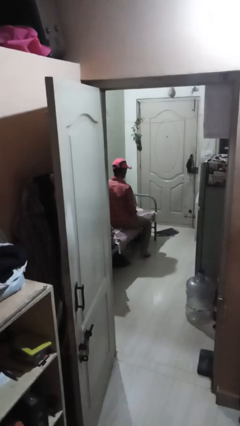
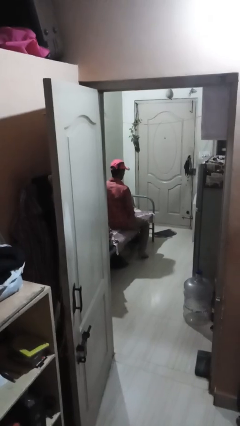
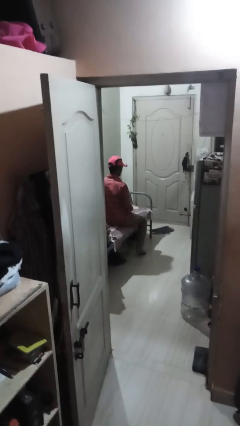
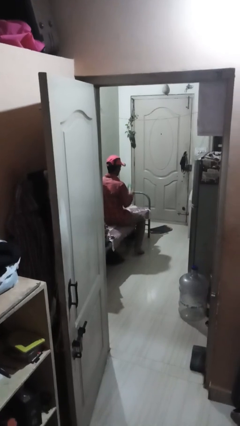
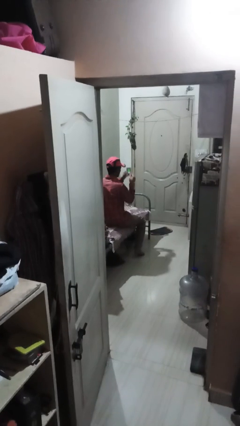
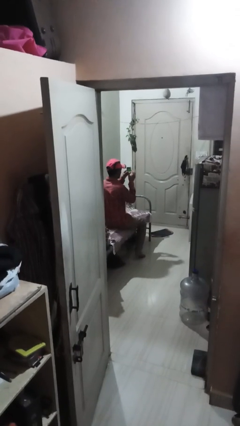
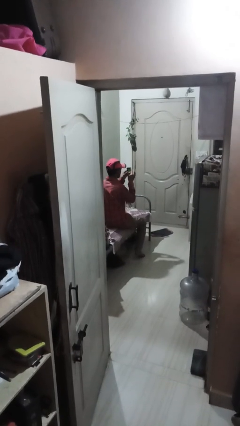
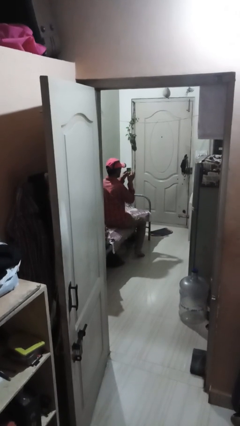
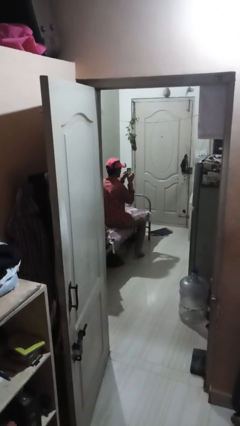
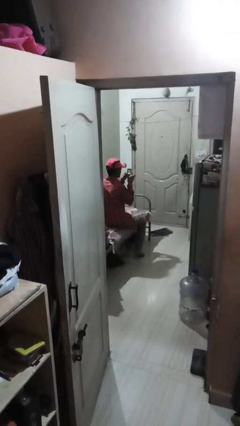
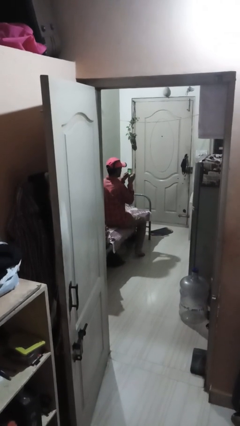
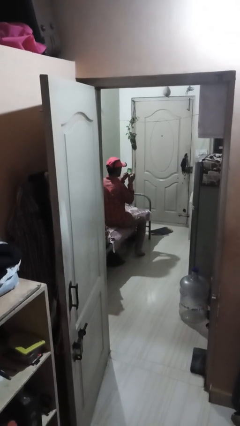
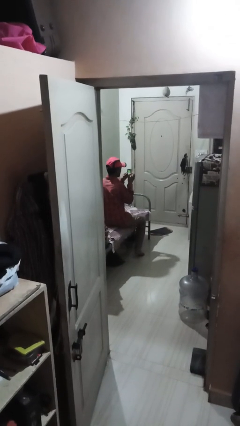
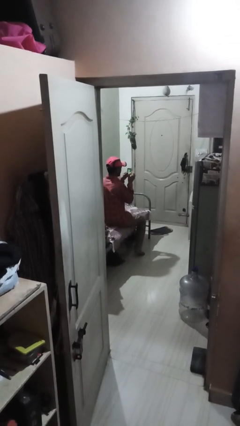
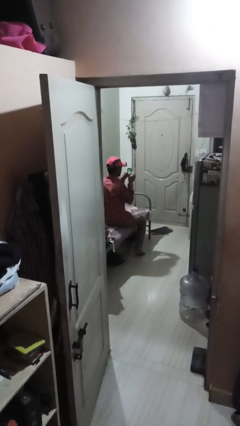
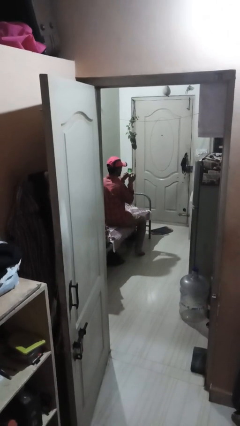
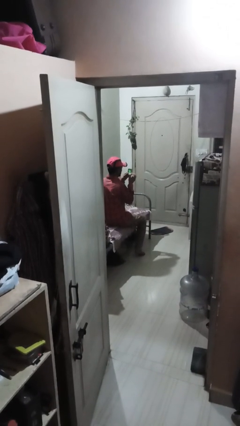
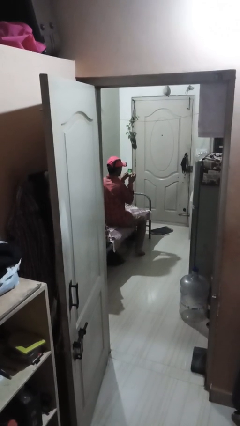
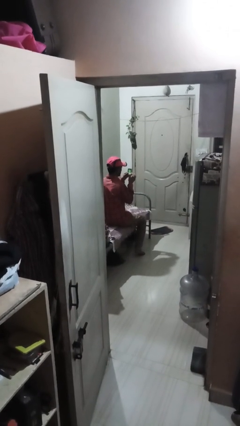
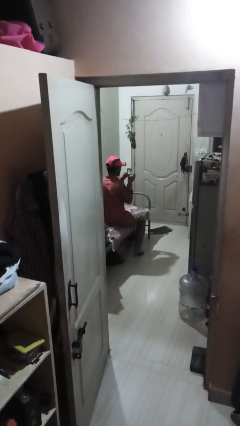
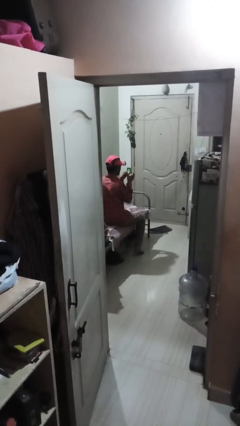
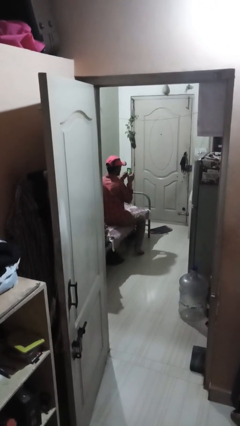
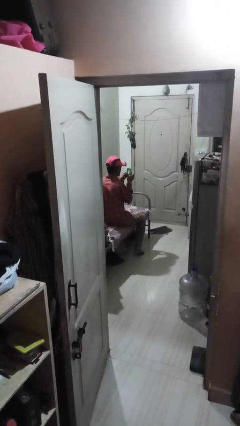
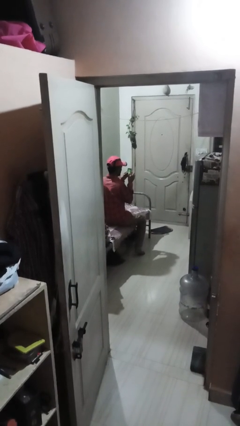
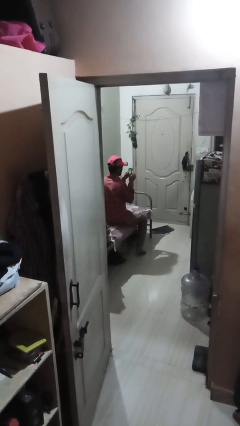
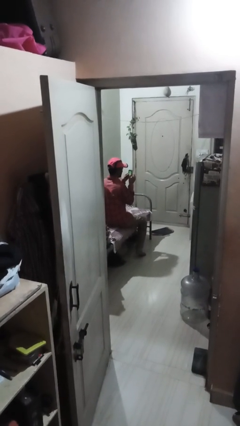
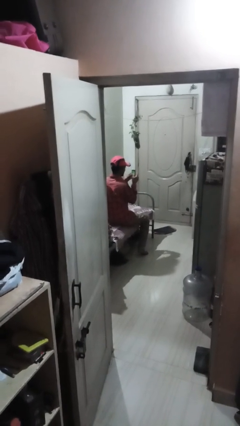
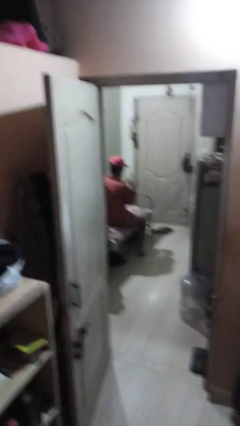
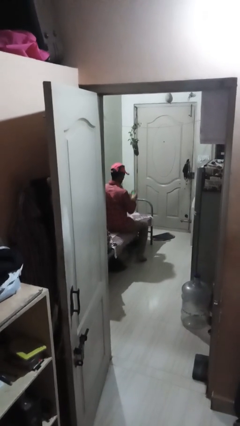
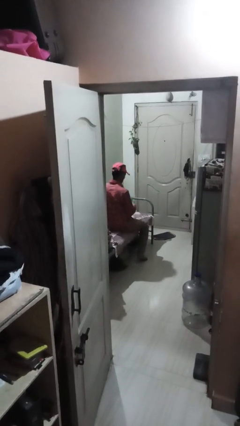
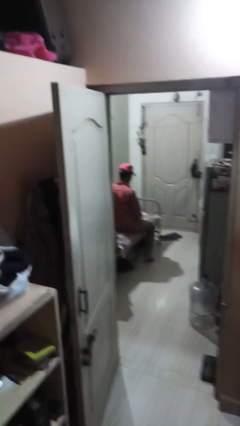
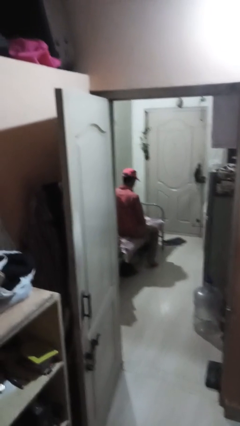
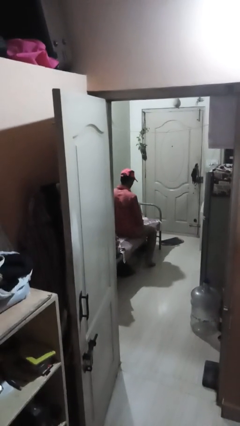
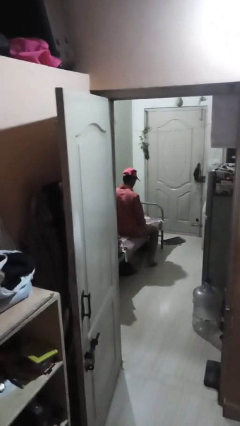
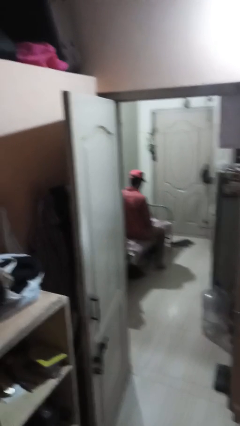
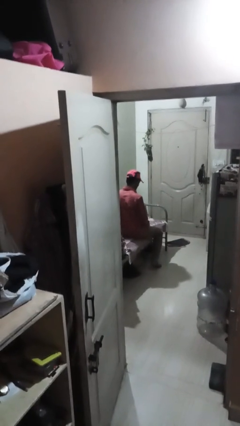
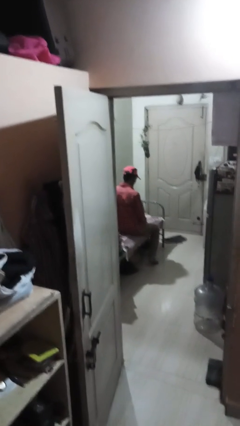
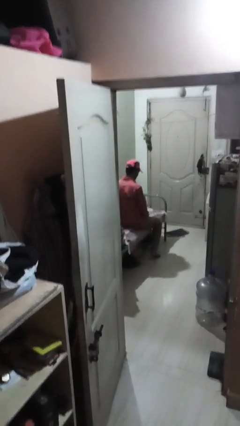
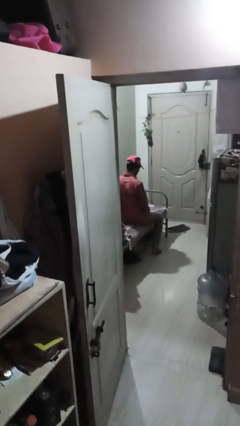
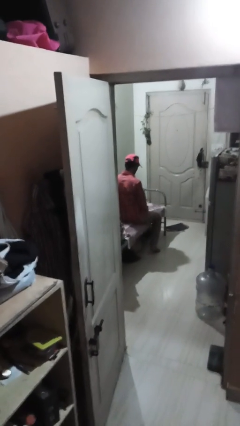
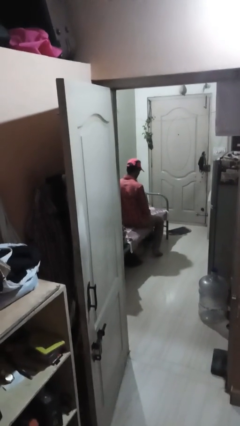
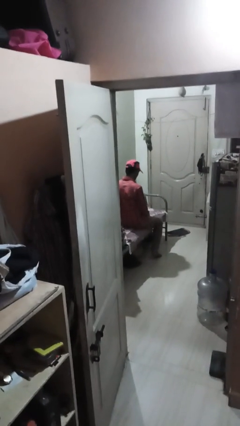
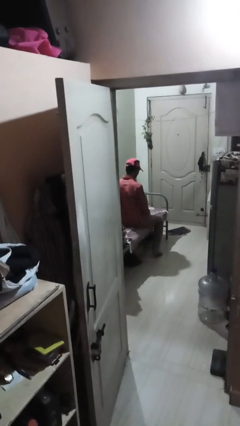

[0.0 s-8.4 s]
person taps object with finger

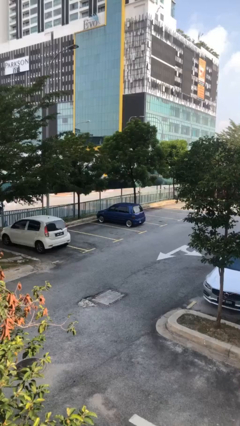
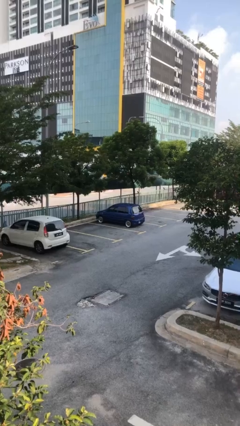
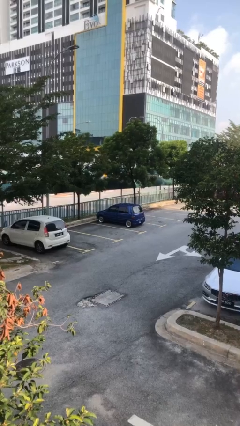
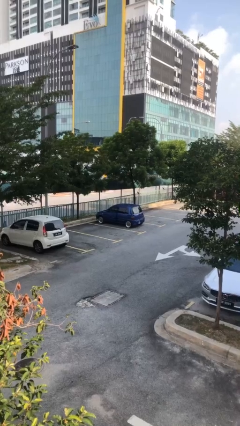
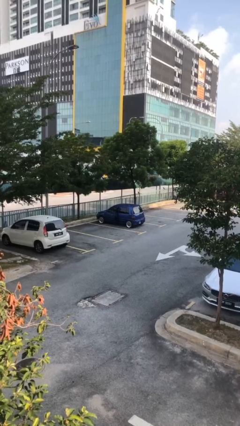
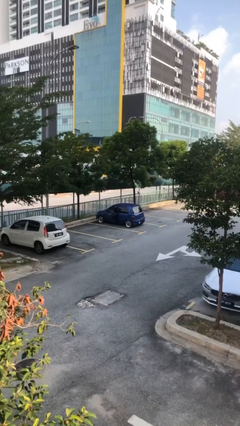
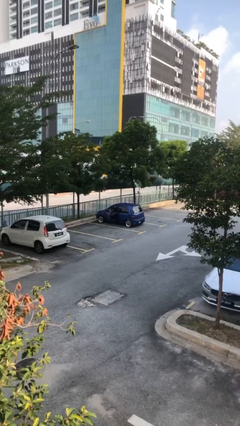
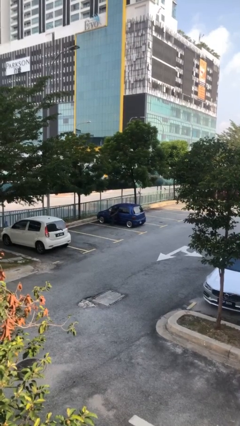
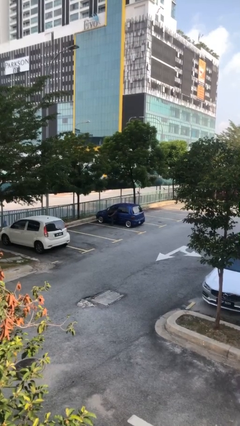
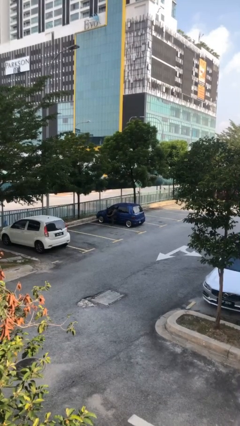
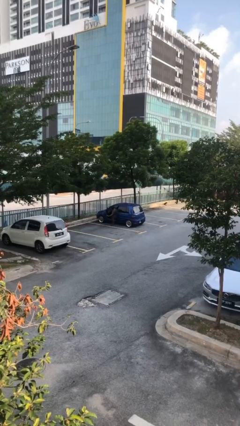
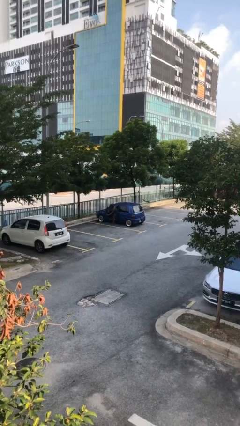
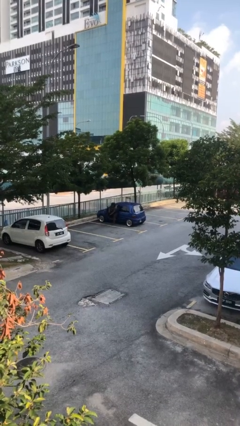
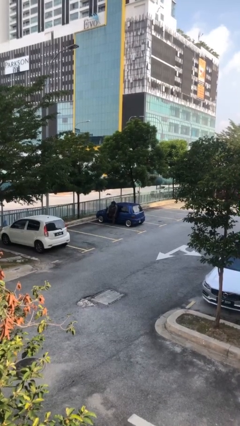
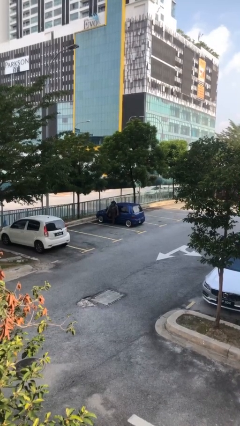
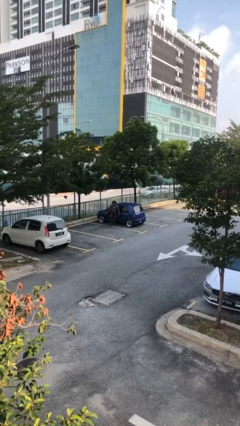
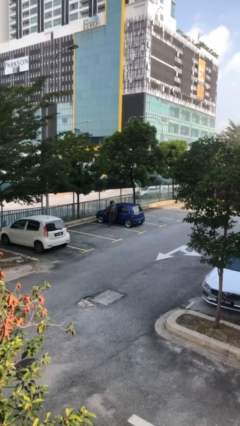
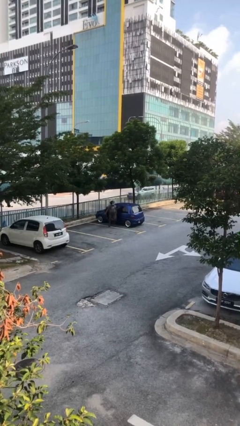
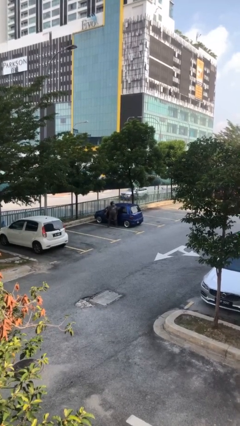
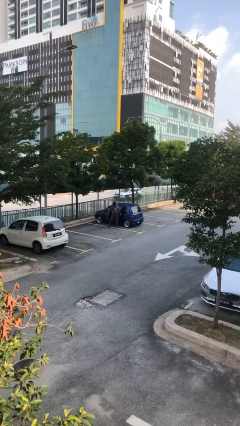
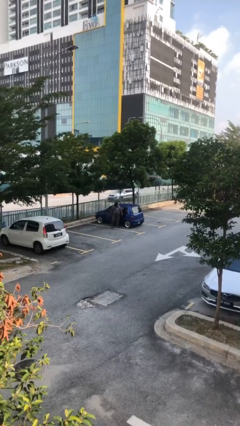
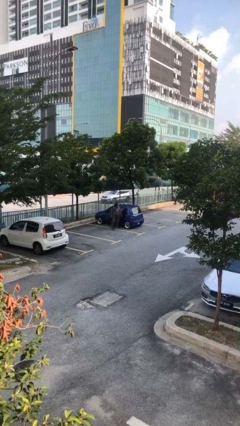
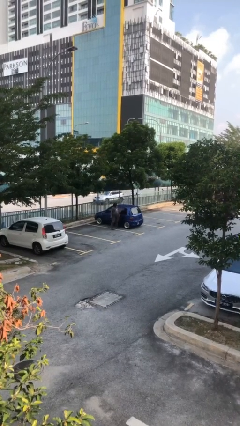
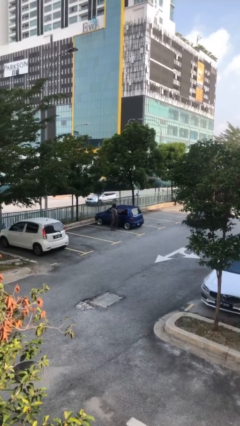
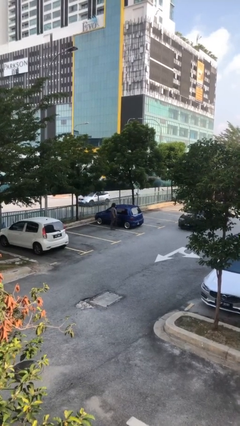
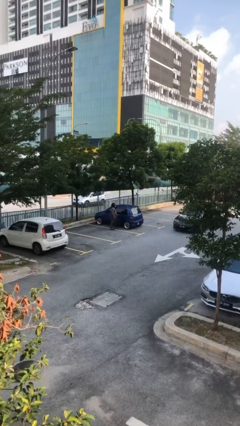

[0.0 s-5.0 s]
car drops off person

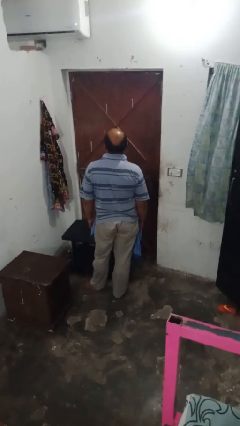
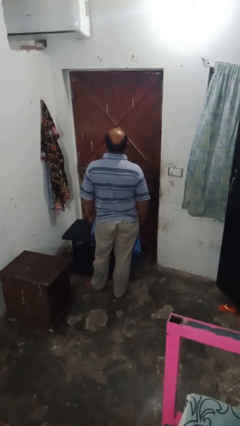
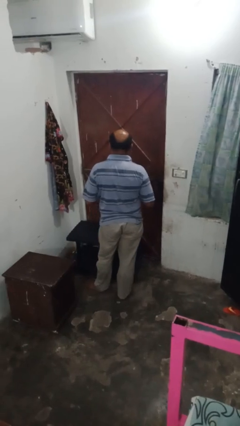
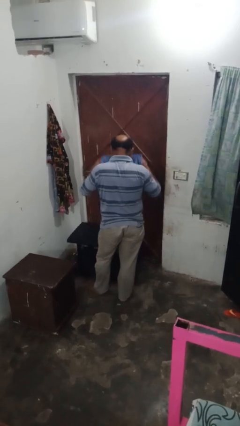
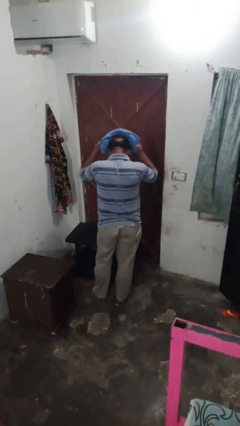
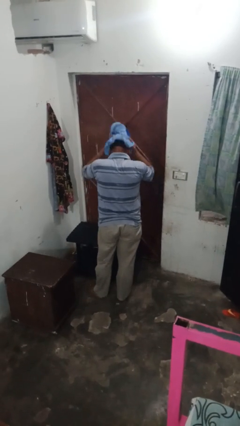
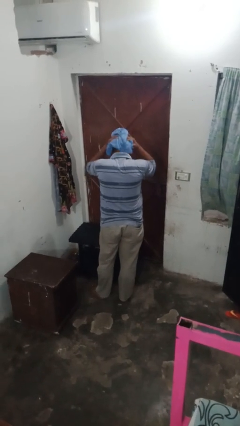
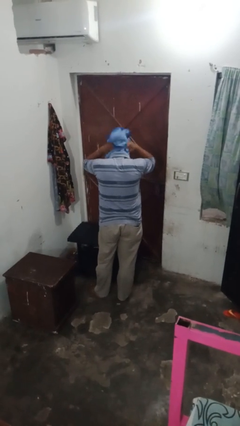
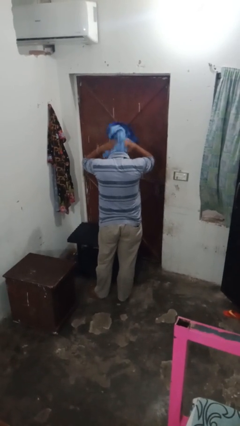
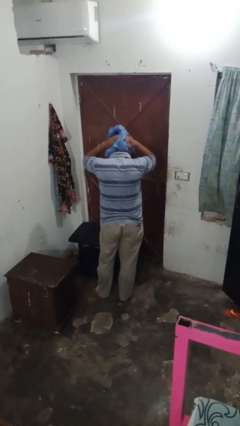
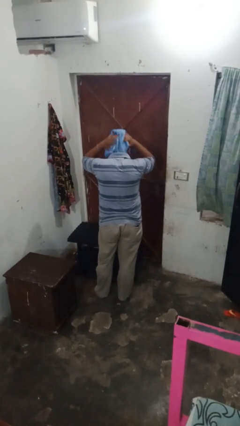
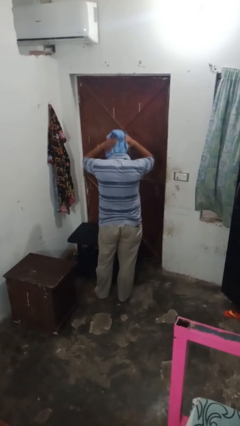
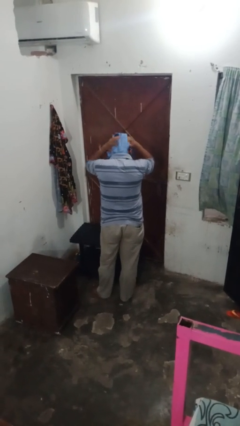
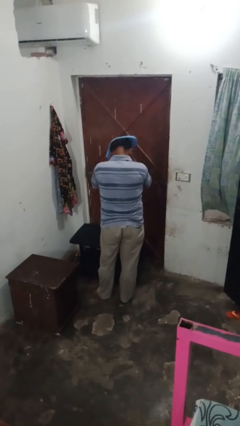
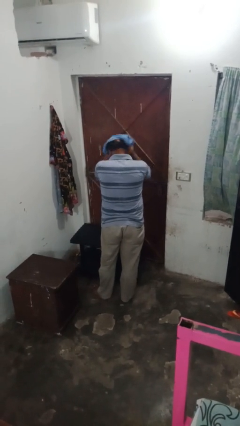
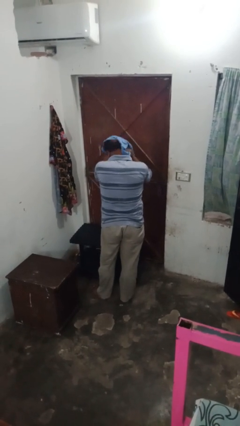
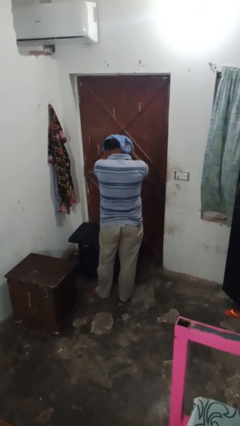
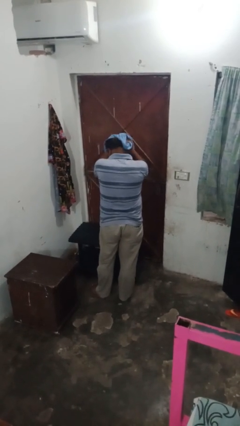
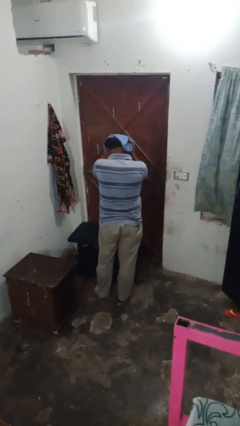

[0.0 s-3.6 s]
person dries hair with towel

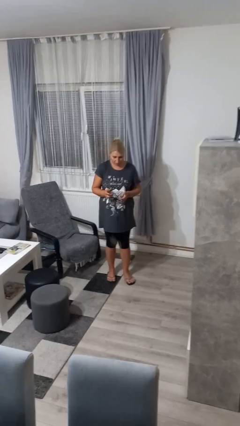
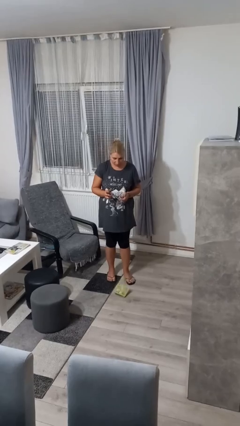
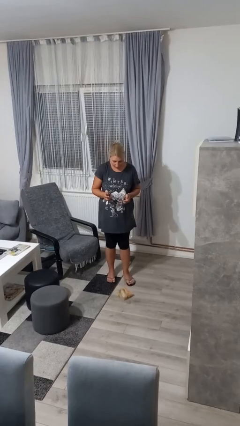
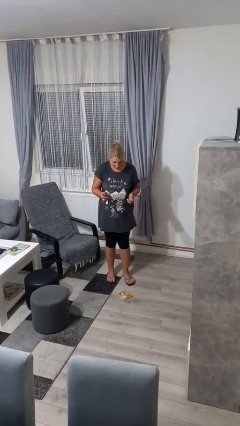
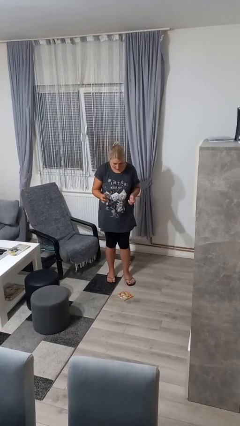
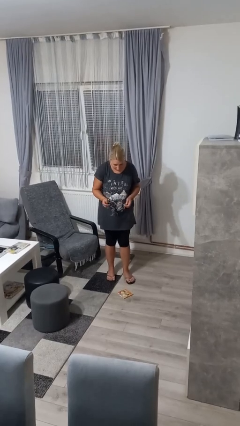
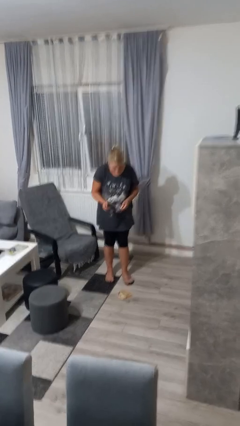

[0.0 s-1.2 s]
person drops object
